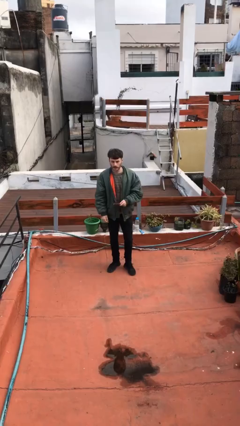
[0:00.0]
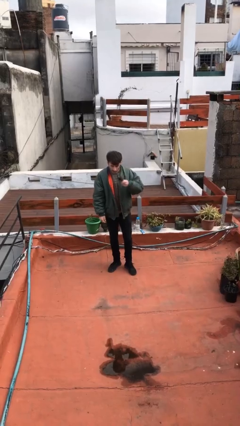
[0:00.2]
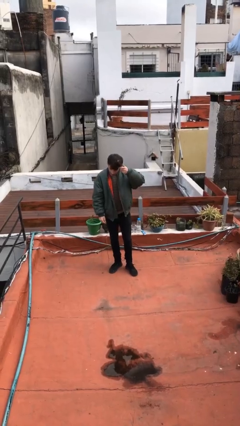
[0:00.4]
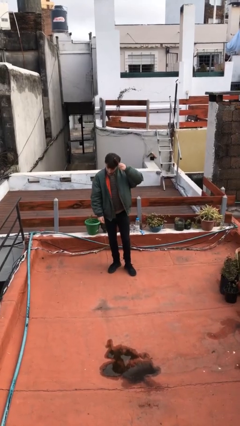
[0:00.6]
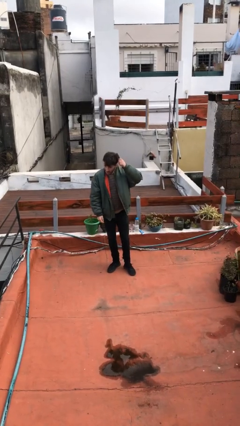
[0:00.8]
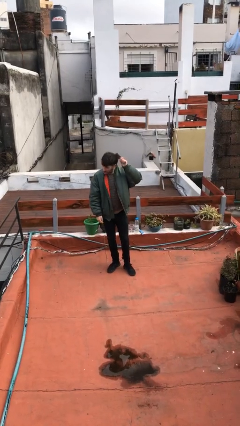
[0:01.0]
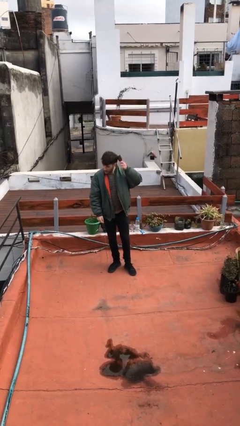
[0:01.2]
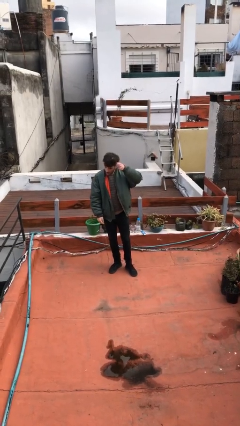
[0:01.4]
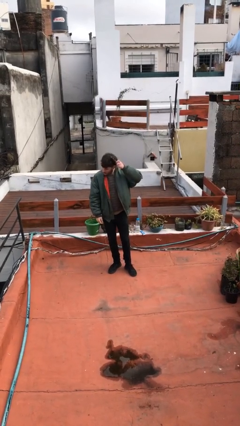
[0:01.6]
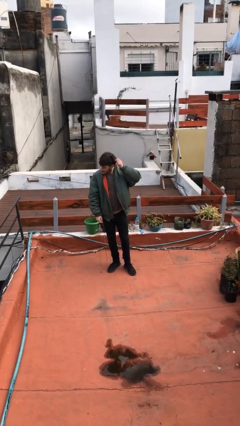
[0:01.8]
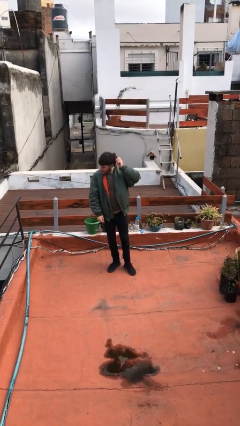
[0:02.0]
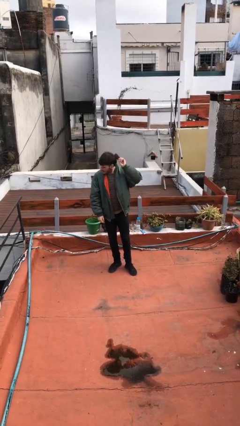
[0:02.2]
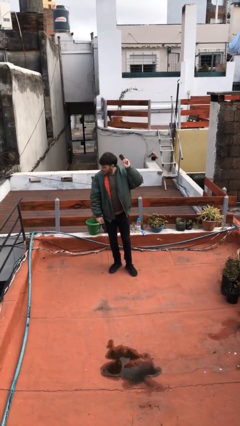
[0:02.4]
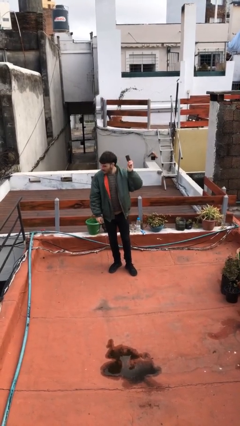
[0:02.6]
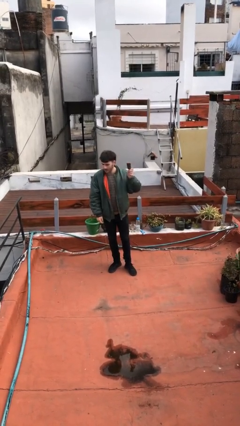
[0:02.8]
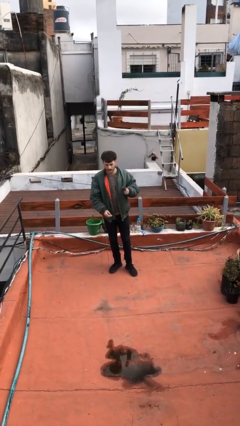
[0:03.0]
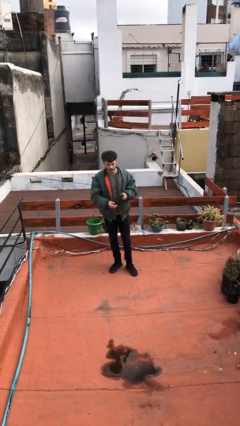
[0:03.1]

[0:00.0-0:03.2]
person brushes hair

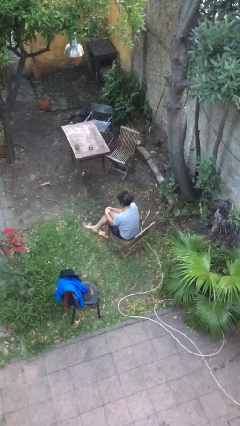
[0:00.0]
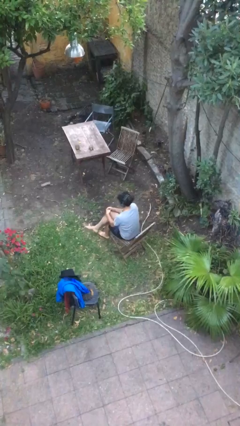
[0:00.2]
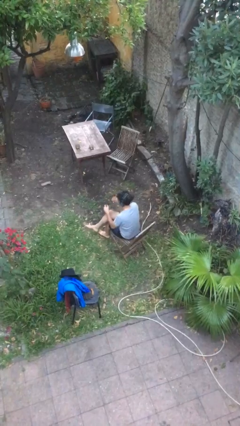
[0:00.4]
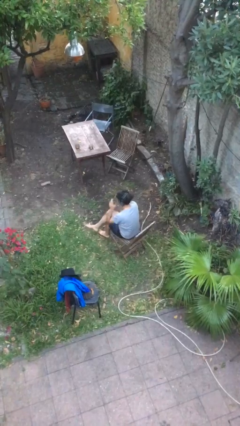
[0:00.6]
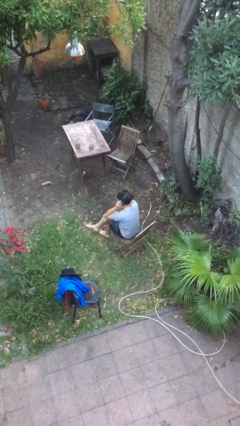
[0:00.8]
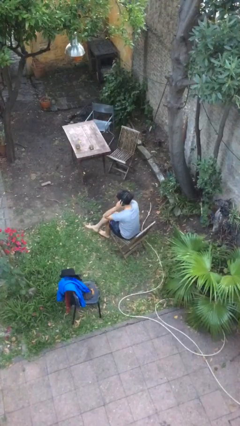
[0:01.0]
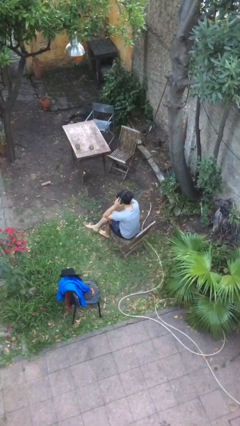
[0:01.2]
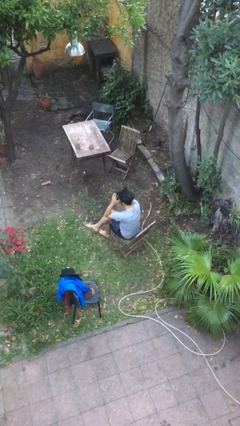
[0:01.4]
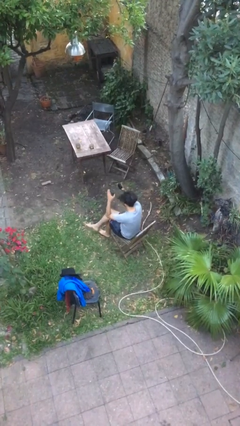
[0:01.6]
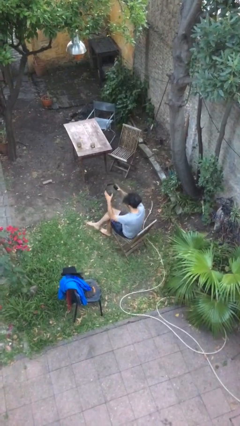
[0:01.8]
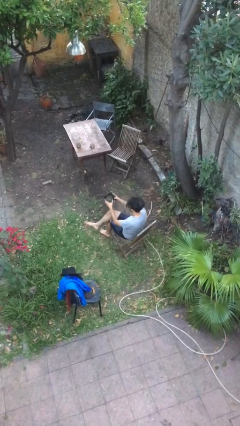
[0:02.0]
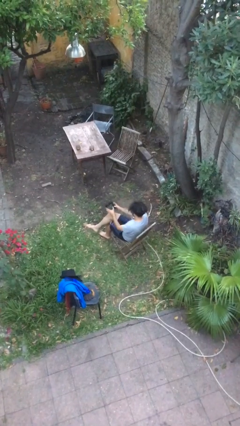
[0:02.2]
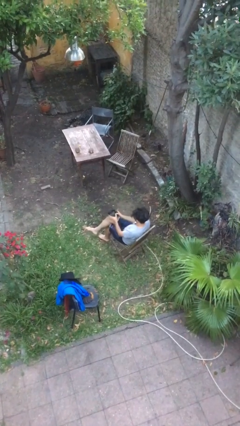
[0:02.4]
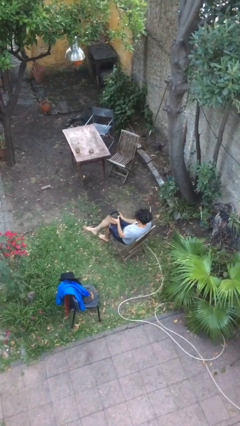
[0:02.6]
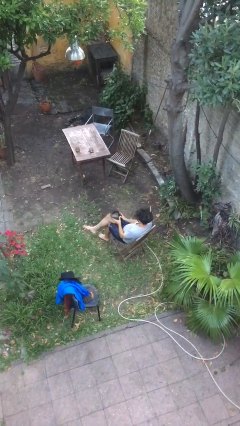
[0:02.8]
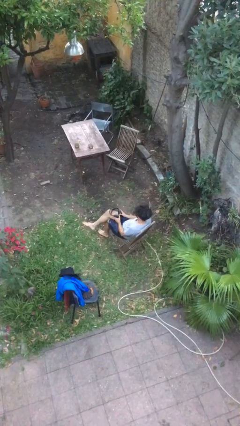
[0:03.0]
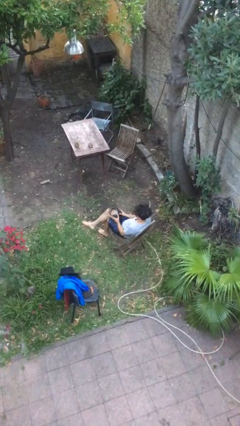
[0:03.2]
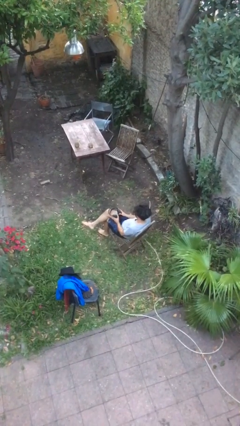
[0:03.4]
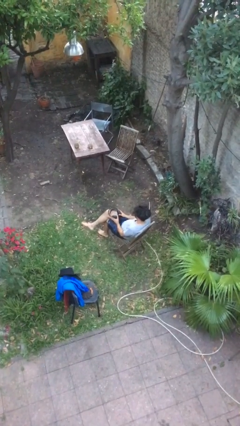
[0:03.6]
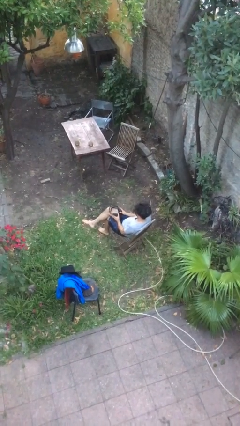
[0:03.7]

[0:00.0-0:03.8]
person takes off headphones

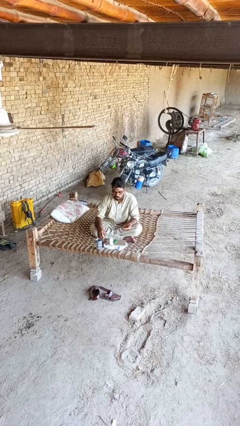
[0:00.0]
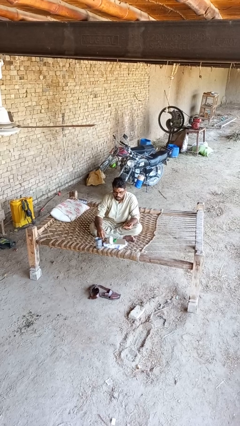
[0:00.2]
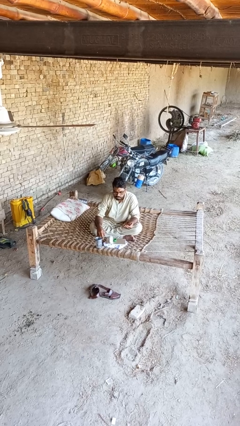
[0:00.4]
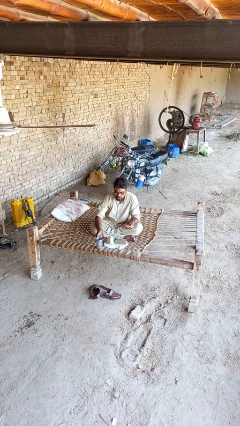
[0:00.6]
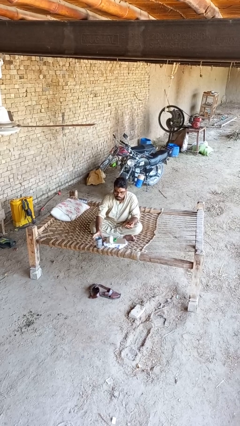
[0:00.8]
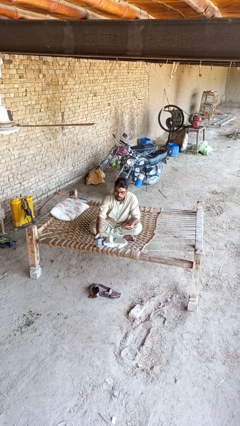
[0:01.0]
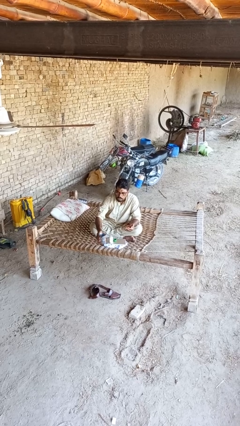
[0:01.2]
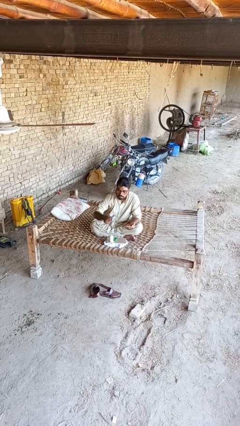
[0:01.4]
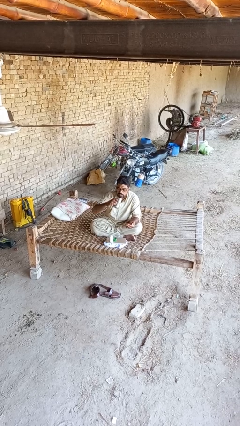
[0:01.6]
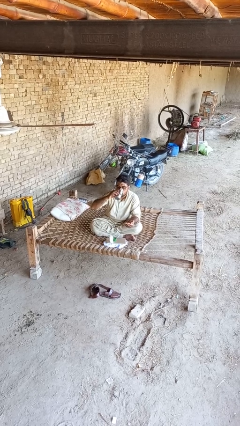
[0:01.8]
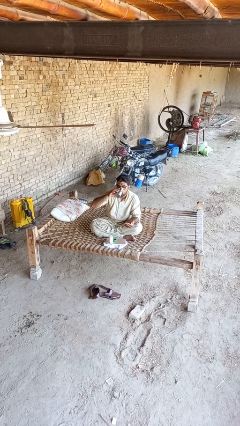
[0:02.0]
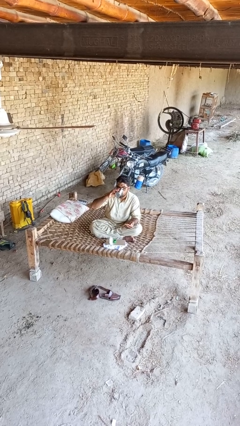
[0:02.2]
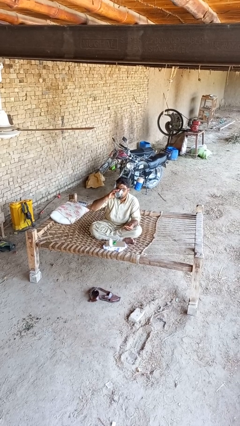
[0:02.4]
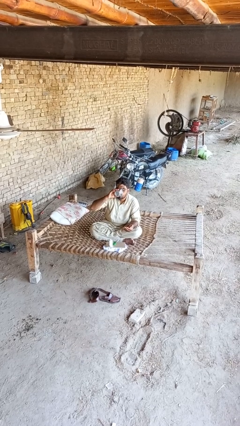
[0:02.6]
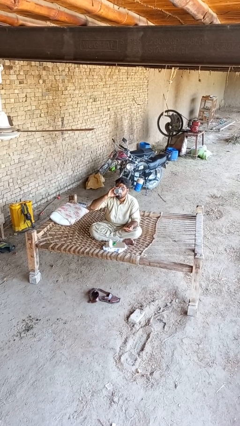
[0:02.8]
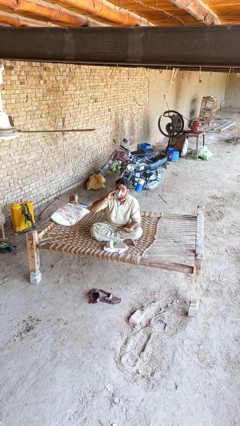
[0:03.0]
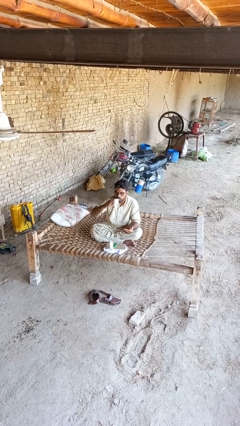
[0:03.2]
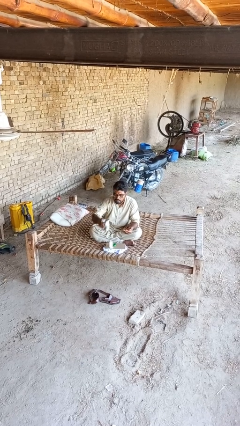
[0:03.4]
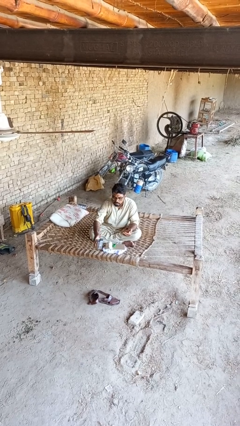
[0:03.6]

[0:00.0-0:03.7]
person drinks from cup

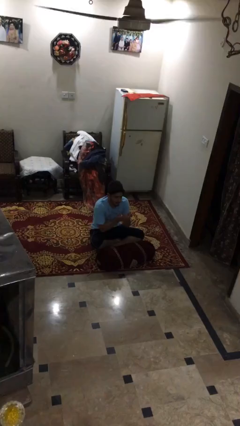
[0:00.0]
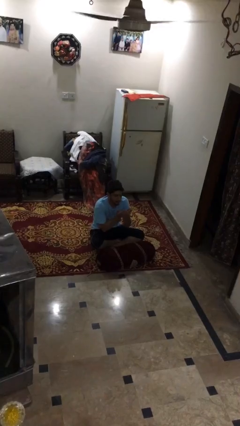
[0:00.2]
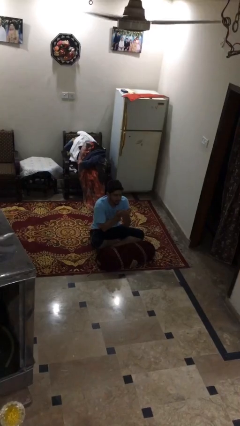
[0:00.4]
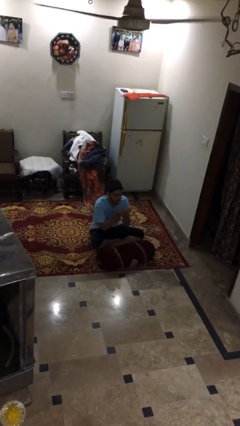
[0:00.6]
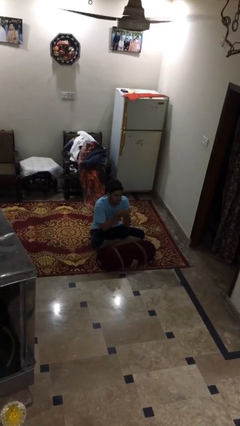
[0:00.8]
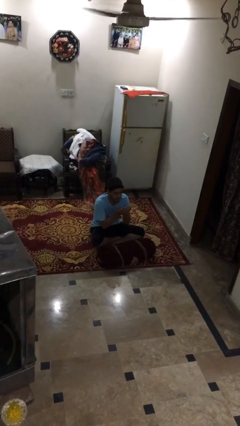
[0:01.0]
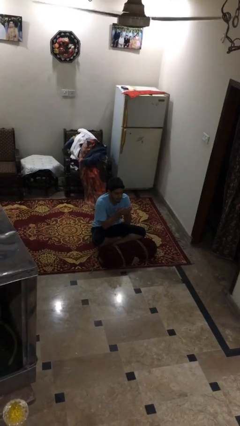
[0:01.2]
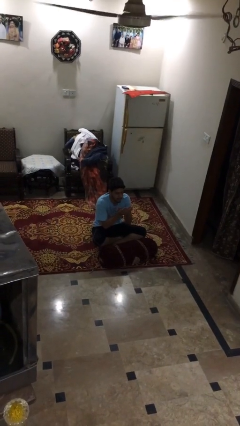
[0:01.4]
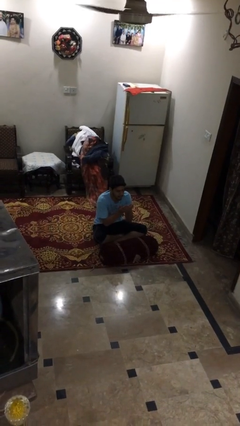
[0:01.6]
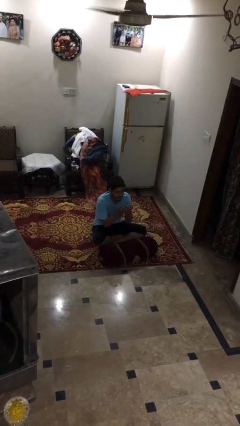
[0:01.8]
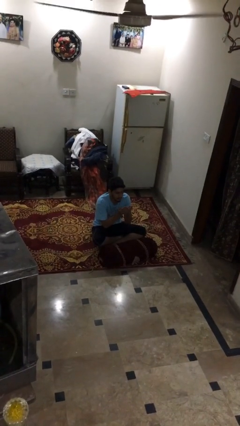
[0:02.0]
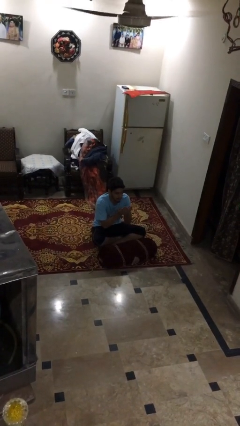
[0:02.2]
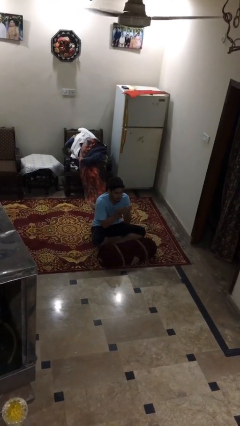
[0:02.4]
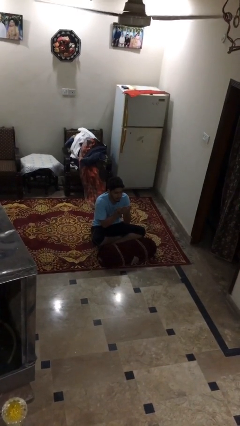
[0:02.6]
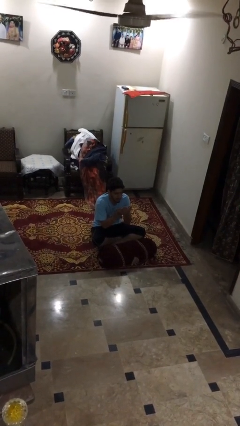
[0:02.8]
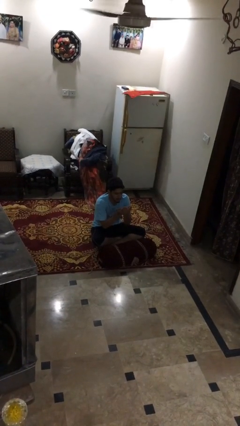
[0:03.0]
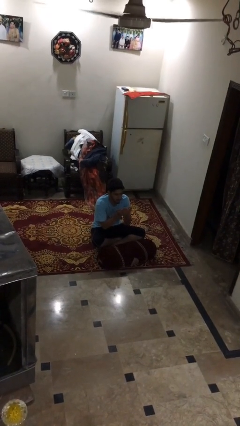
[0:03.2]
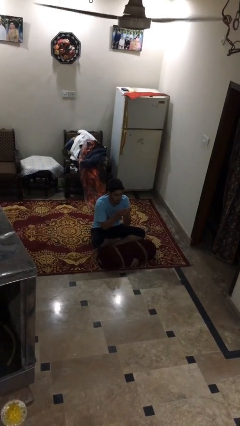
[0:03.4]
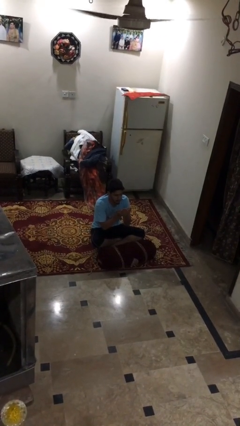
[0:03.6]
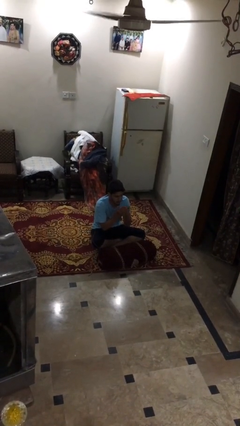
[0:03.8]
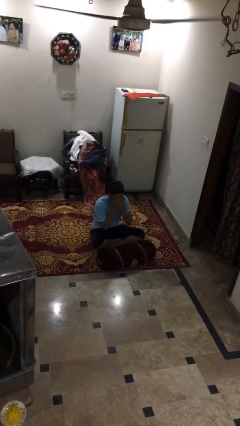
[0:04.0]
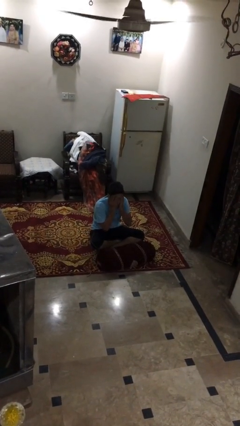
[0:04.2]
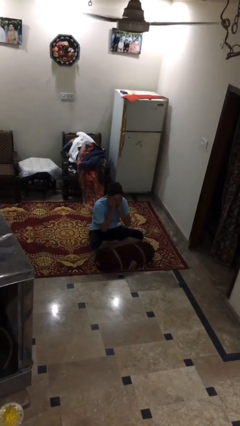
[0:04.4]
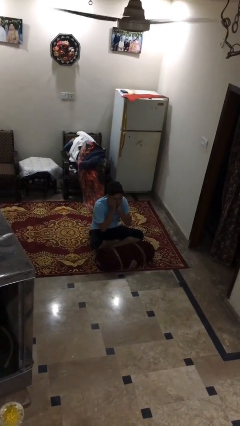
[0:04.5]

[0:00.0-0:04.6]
person prays

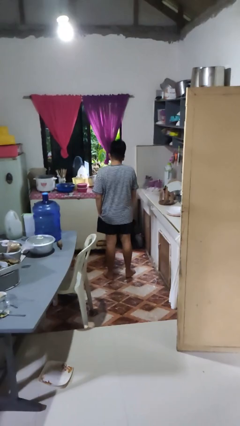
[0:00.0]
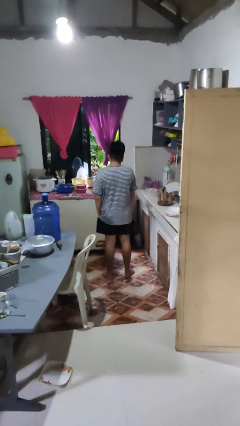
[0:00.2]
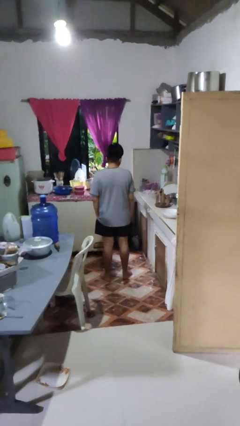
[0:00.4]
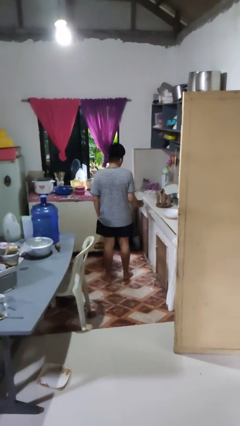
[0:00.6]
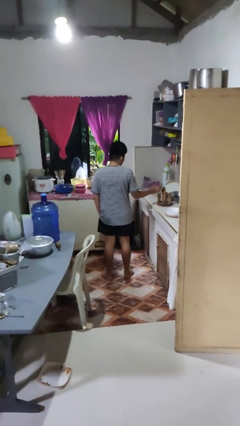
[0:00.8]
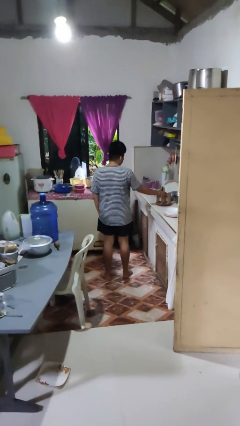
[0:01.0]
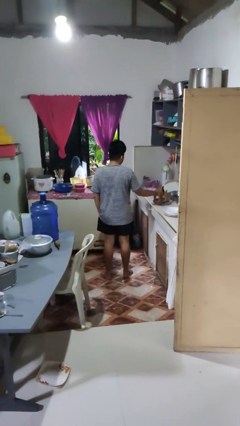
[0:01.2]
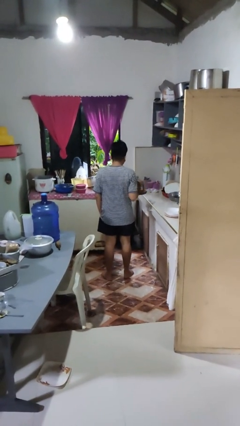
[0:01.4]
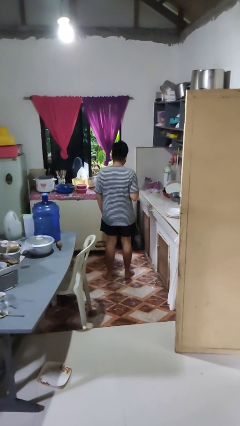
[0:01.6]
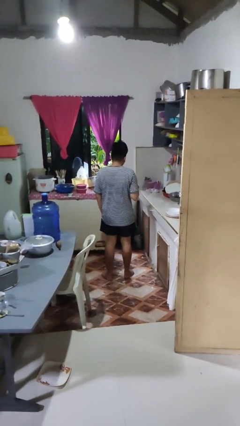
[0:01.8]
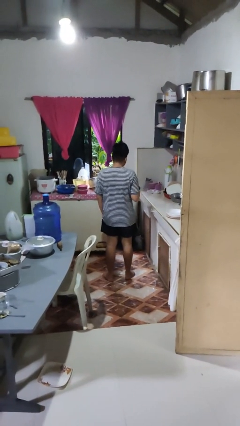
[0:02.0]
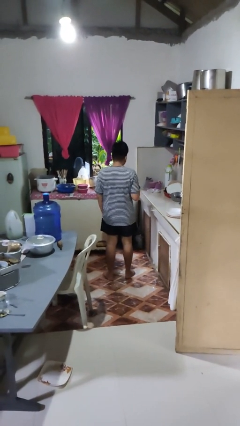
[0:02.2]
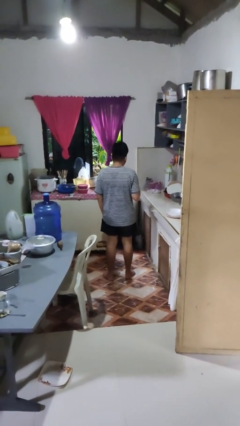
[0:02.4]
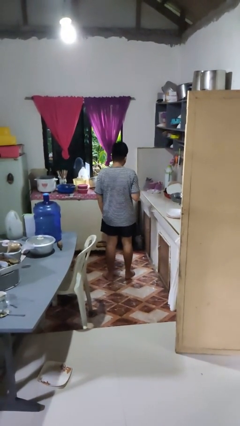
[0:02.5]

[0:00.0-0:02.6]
person picks up object from countertop
